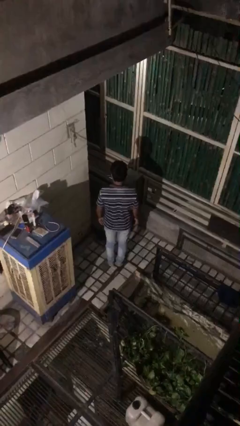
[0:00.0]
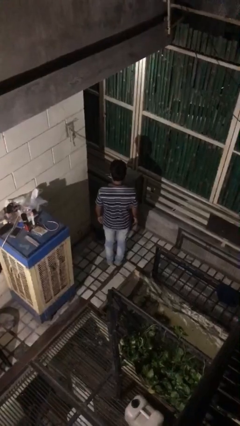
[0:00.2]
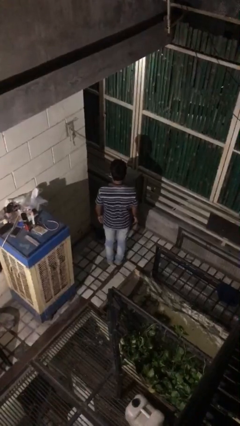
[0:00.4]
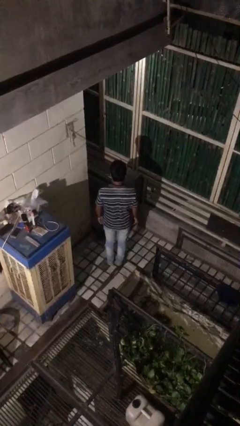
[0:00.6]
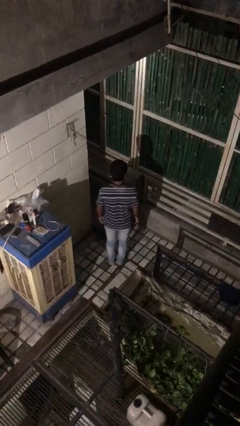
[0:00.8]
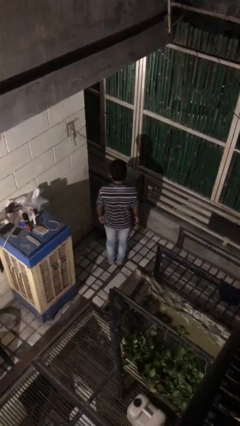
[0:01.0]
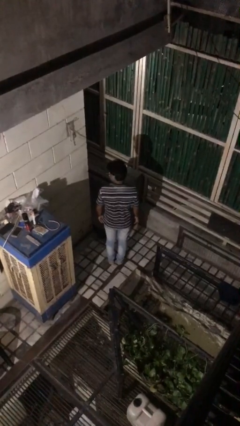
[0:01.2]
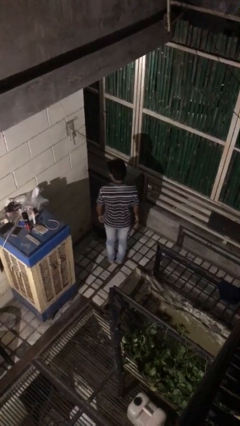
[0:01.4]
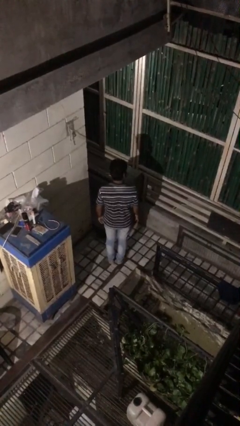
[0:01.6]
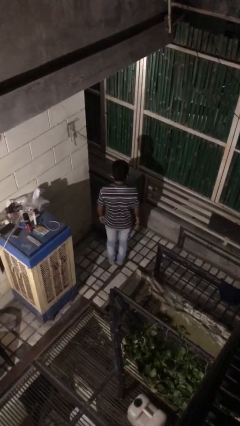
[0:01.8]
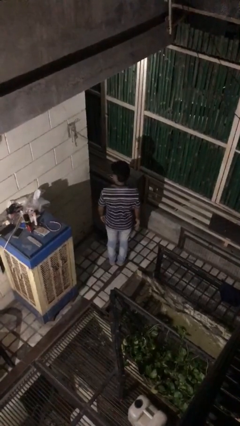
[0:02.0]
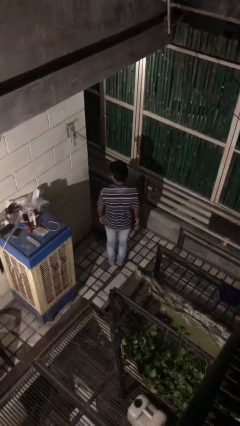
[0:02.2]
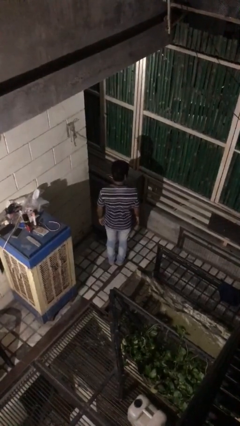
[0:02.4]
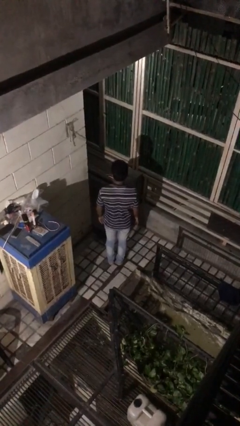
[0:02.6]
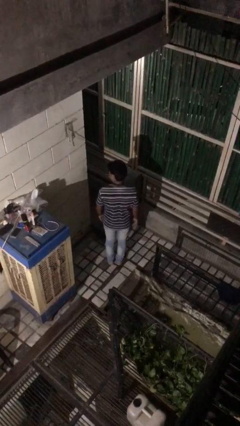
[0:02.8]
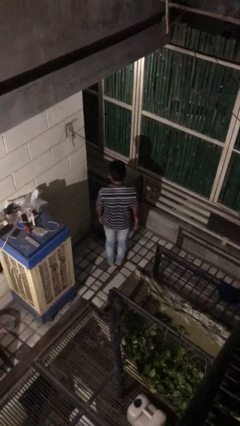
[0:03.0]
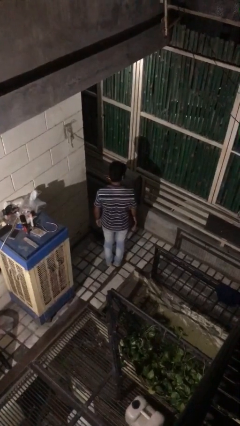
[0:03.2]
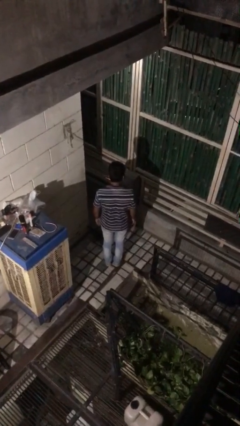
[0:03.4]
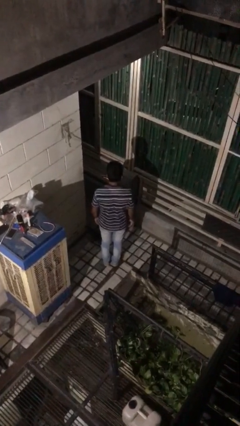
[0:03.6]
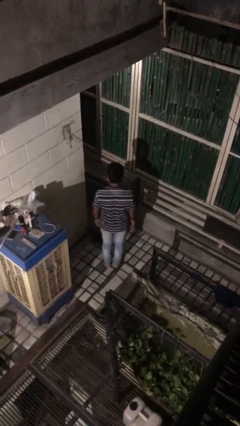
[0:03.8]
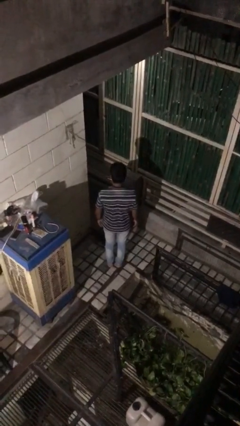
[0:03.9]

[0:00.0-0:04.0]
person shakes head

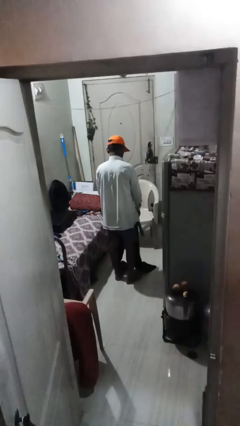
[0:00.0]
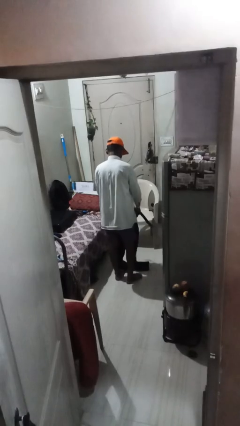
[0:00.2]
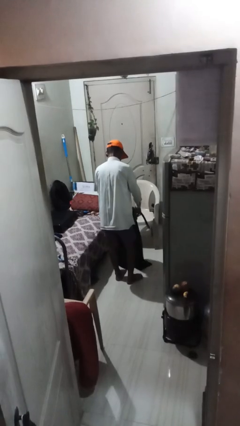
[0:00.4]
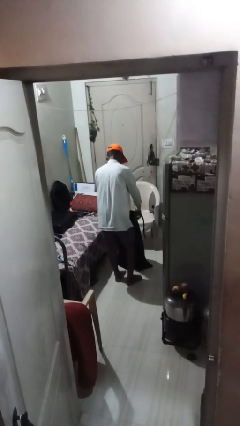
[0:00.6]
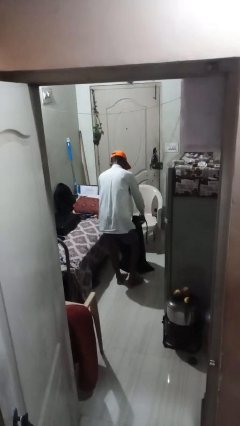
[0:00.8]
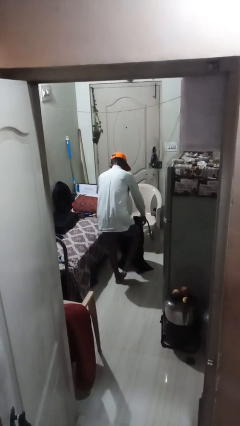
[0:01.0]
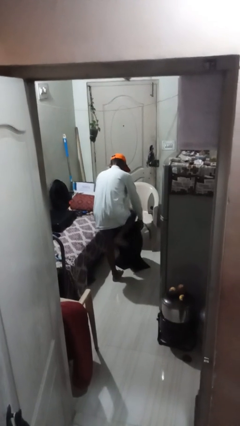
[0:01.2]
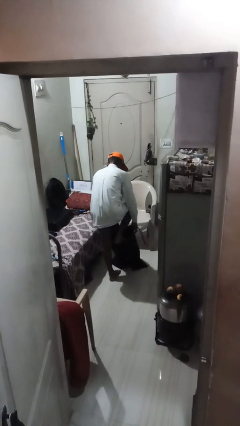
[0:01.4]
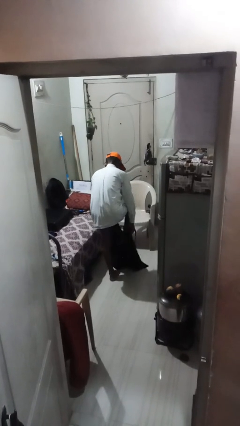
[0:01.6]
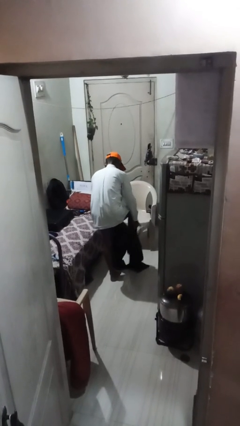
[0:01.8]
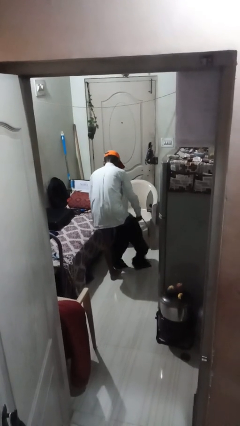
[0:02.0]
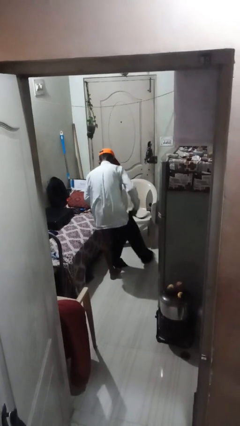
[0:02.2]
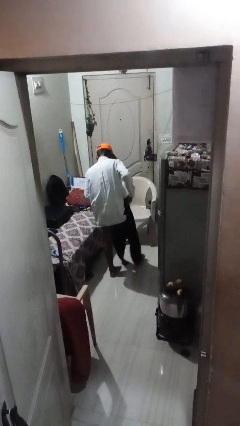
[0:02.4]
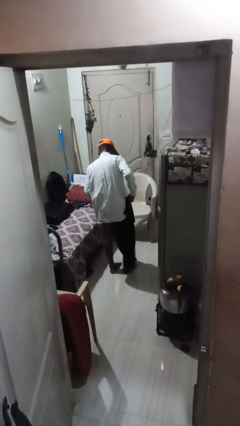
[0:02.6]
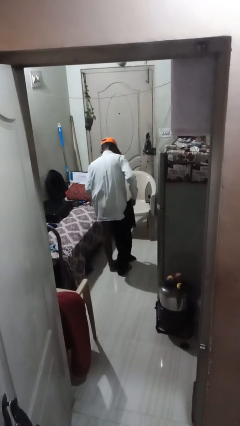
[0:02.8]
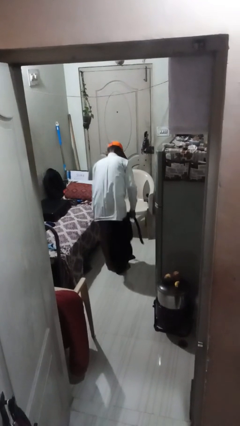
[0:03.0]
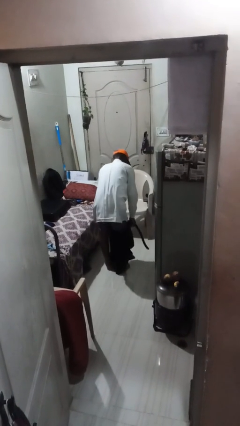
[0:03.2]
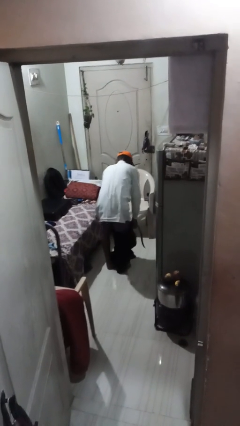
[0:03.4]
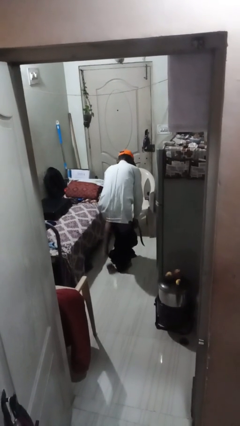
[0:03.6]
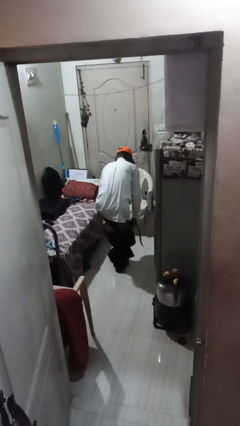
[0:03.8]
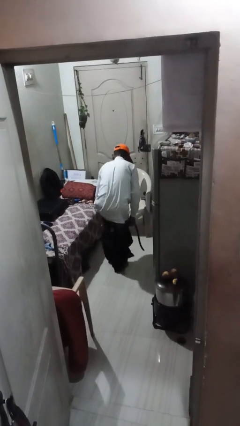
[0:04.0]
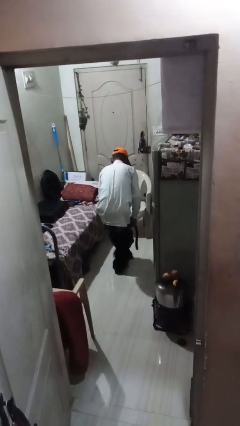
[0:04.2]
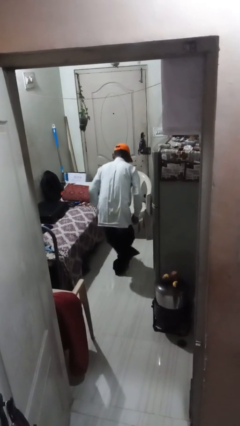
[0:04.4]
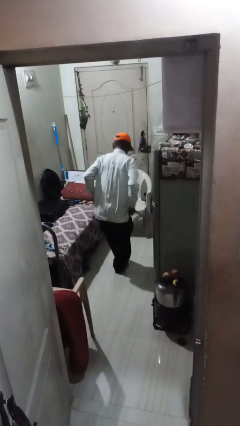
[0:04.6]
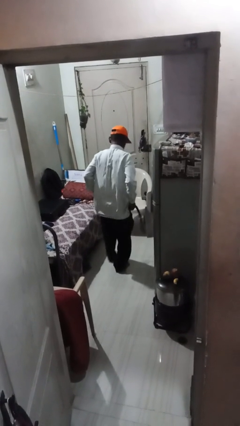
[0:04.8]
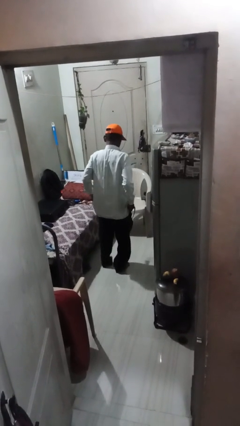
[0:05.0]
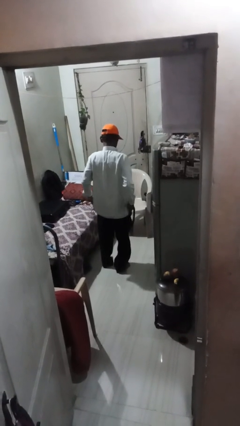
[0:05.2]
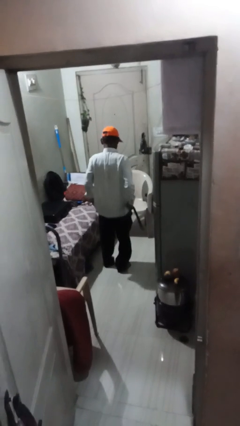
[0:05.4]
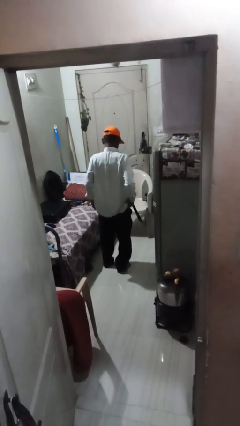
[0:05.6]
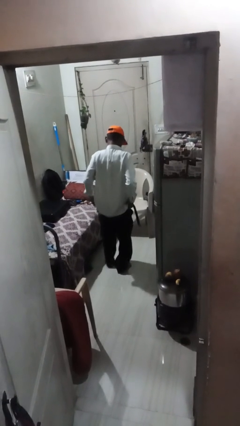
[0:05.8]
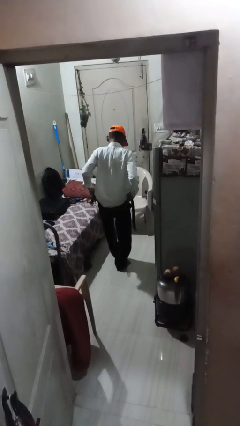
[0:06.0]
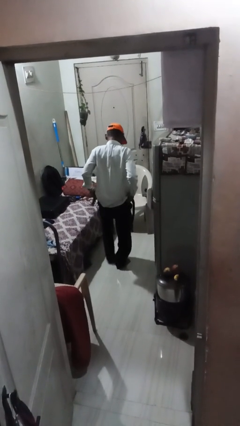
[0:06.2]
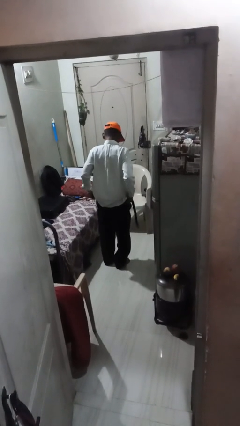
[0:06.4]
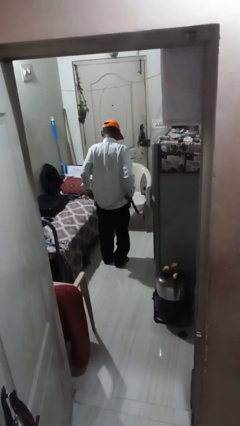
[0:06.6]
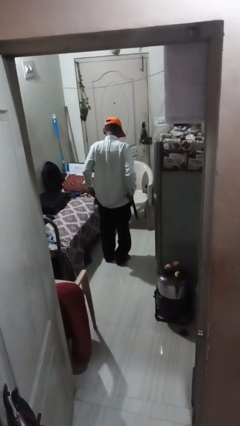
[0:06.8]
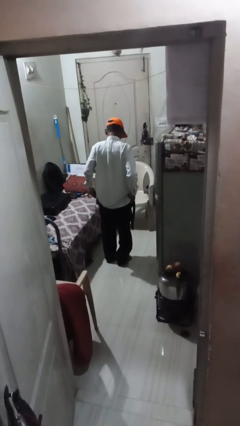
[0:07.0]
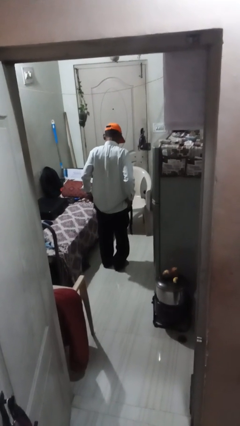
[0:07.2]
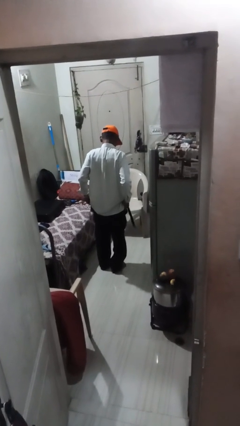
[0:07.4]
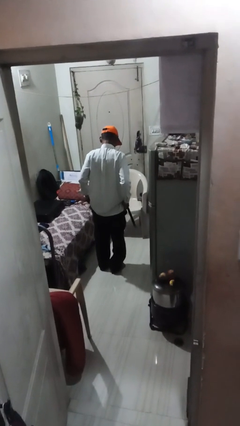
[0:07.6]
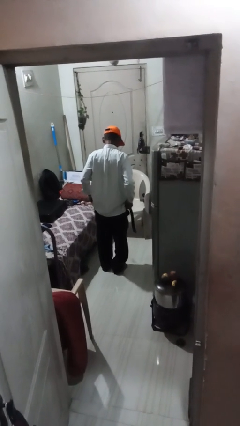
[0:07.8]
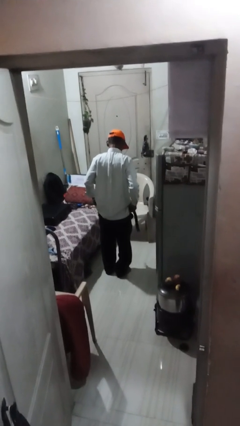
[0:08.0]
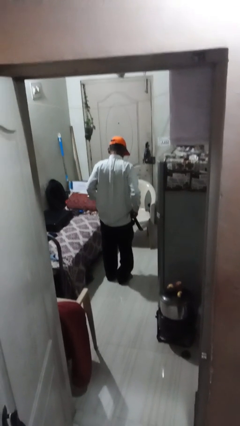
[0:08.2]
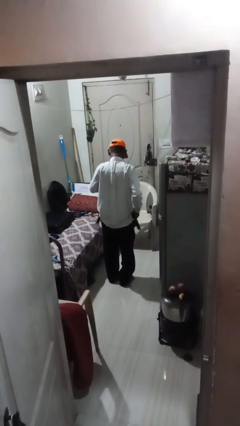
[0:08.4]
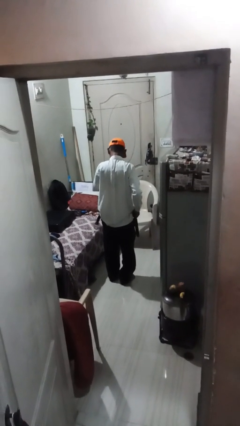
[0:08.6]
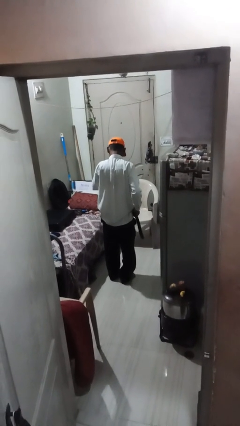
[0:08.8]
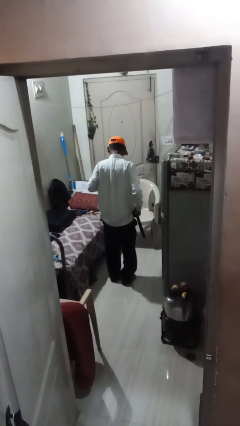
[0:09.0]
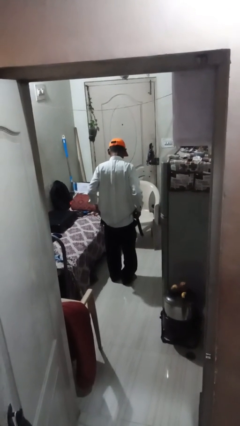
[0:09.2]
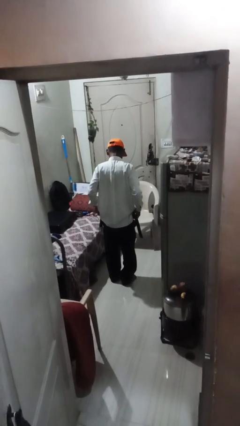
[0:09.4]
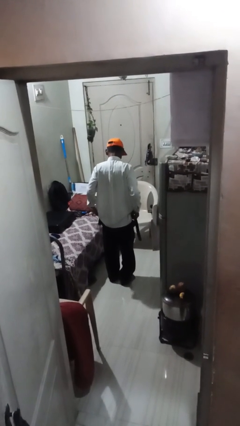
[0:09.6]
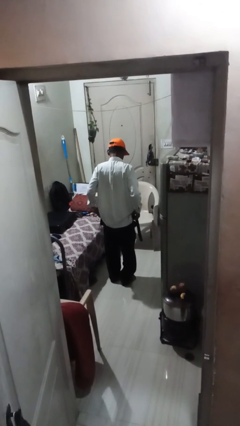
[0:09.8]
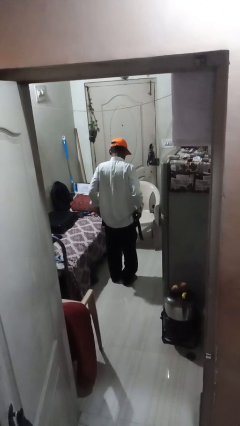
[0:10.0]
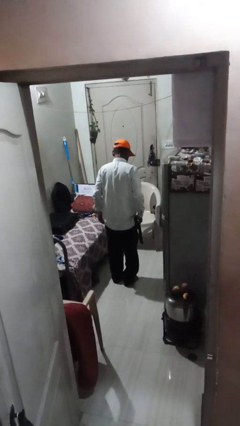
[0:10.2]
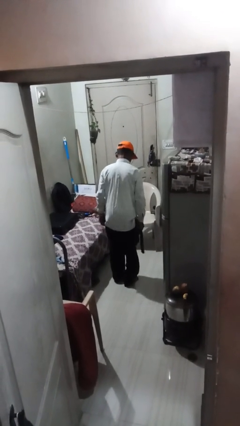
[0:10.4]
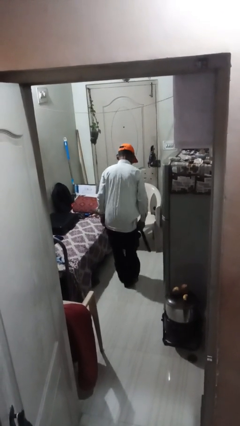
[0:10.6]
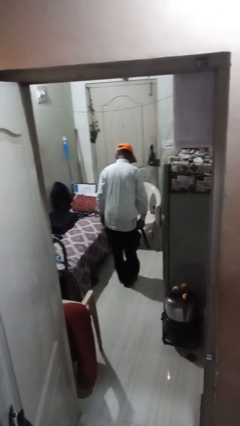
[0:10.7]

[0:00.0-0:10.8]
person puts on pants

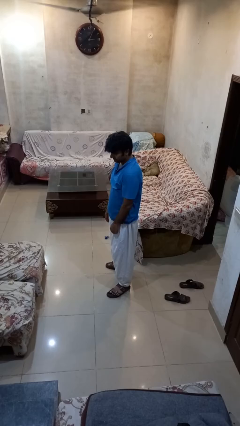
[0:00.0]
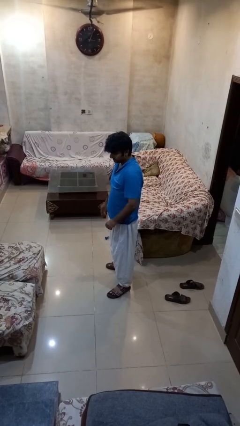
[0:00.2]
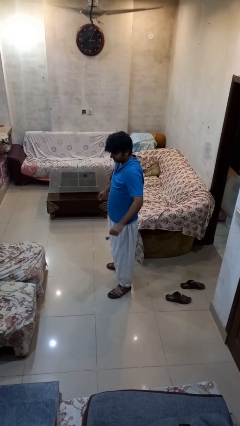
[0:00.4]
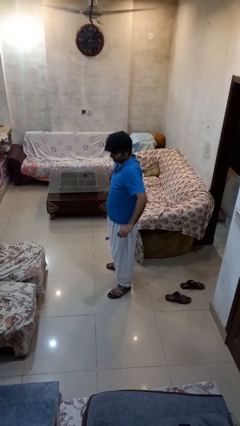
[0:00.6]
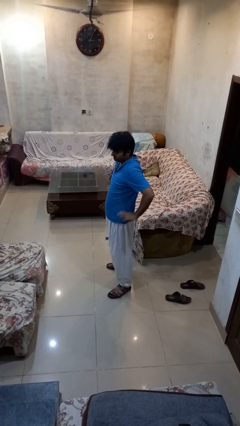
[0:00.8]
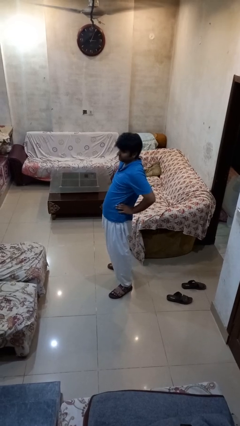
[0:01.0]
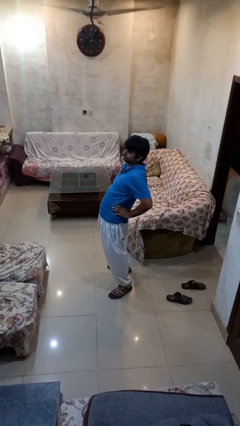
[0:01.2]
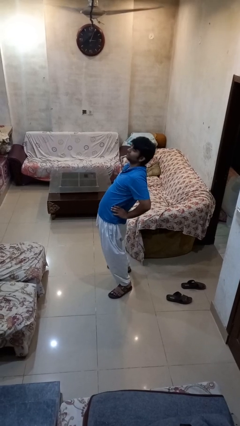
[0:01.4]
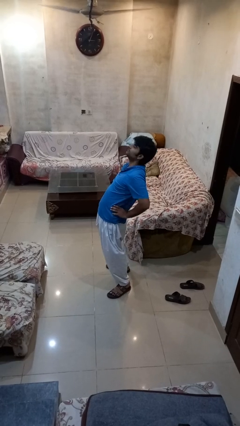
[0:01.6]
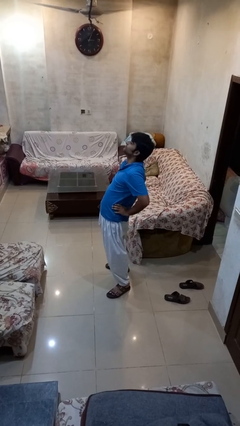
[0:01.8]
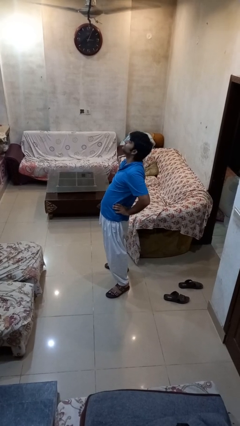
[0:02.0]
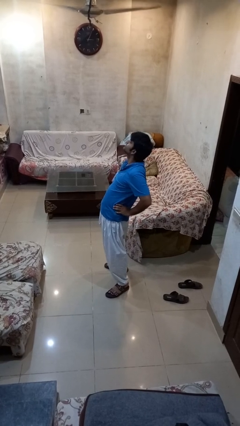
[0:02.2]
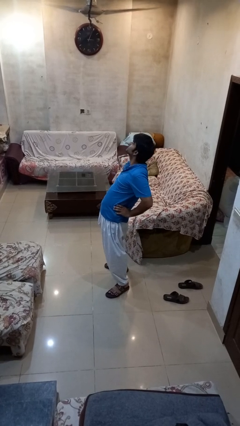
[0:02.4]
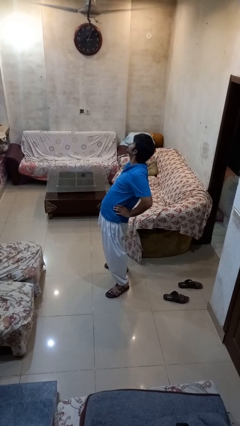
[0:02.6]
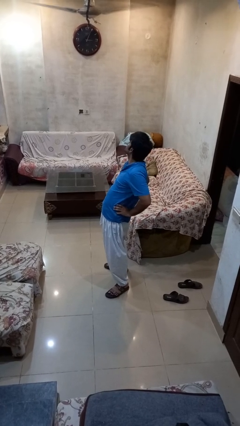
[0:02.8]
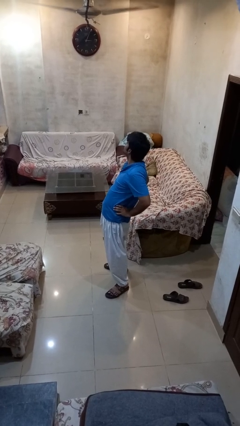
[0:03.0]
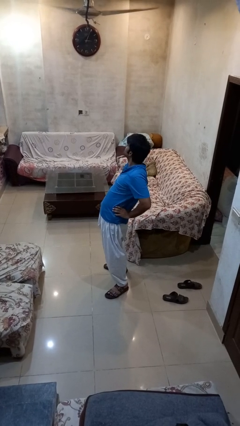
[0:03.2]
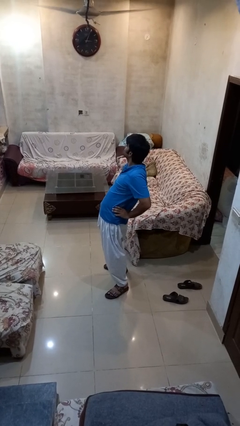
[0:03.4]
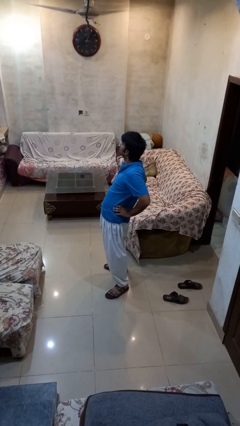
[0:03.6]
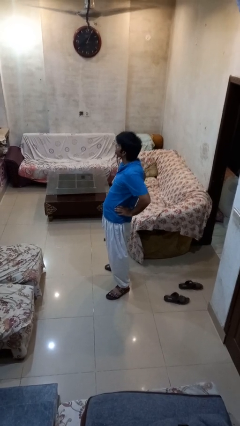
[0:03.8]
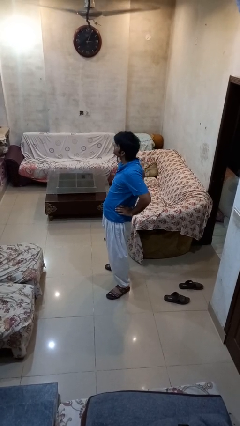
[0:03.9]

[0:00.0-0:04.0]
person stretches back
